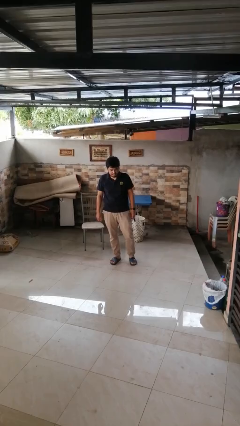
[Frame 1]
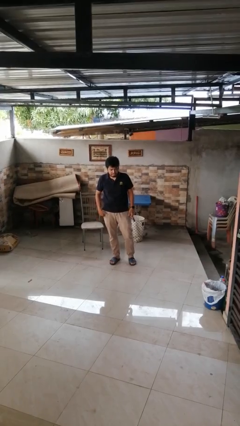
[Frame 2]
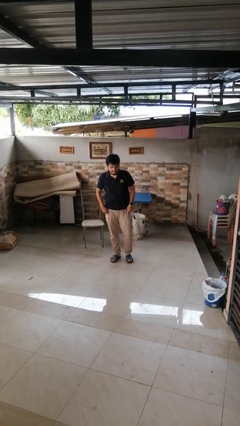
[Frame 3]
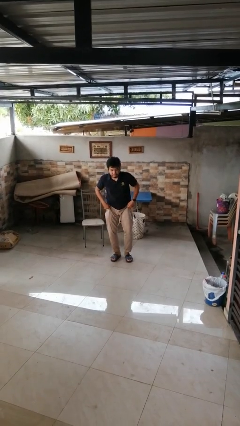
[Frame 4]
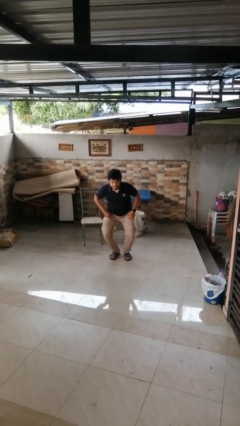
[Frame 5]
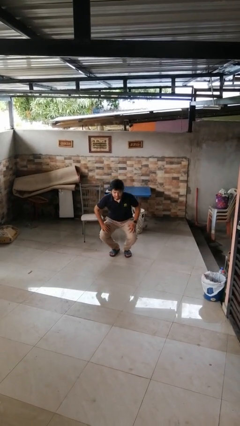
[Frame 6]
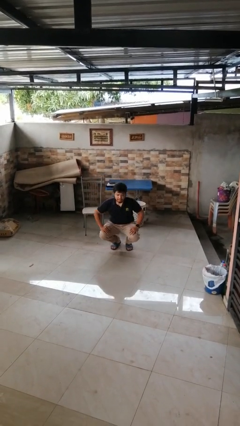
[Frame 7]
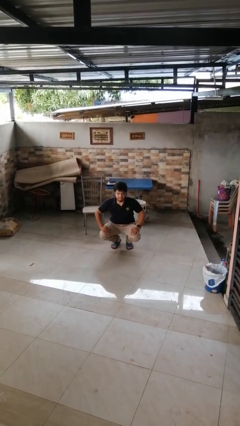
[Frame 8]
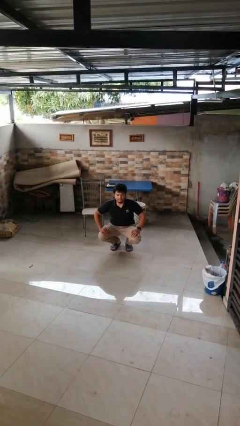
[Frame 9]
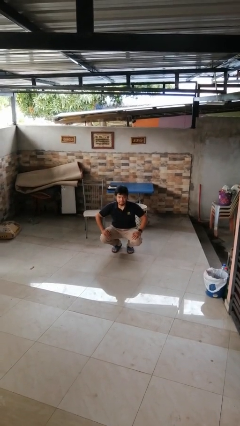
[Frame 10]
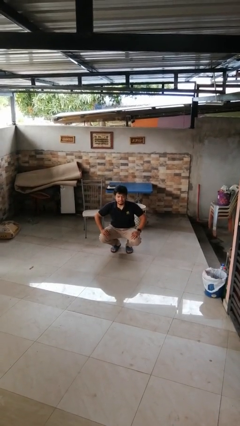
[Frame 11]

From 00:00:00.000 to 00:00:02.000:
person squats

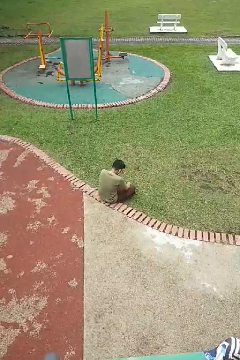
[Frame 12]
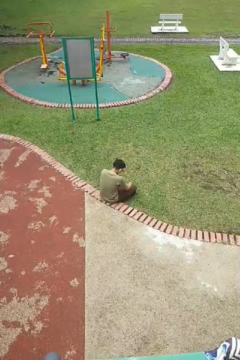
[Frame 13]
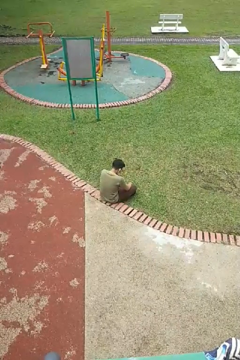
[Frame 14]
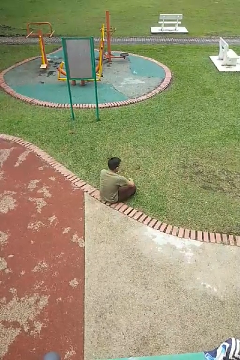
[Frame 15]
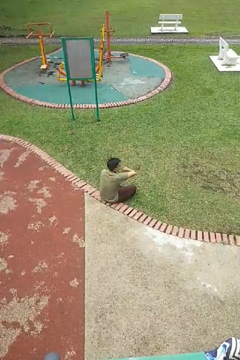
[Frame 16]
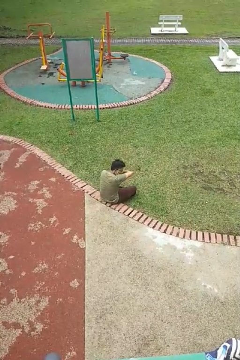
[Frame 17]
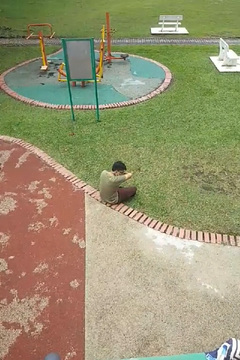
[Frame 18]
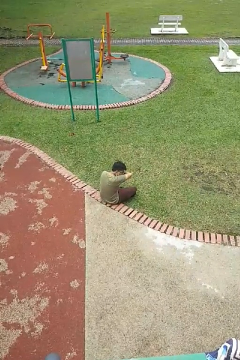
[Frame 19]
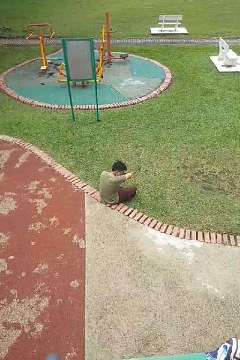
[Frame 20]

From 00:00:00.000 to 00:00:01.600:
person sneezes into arm

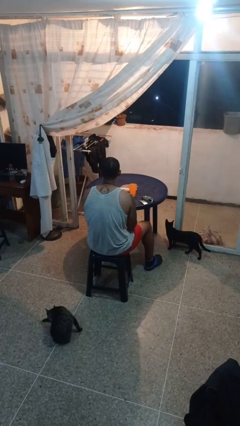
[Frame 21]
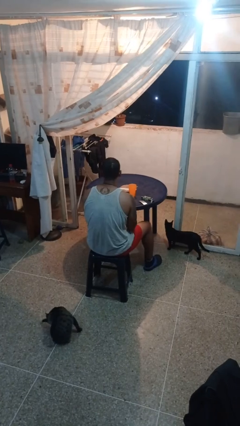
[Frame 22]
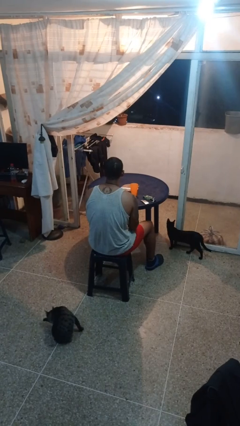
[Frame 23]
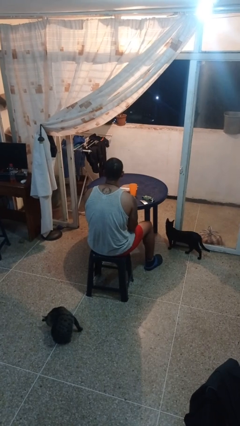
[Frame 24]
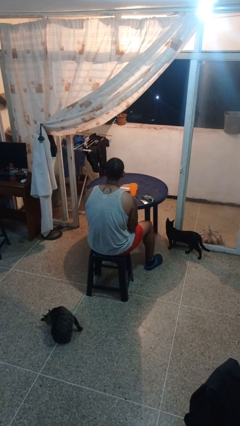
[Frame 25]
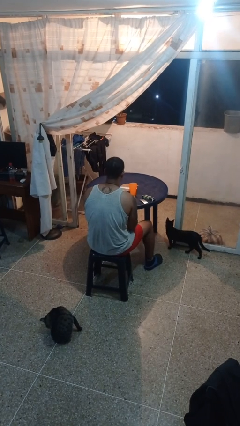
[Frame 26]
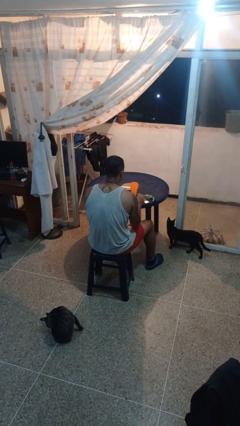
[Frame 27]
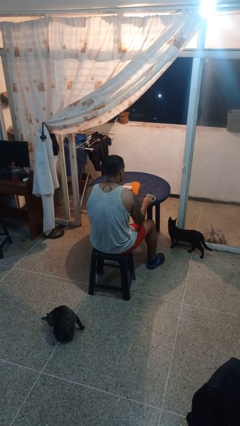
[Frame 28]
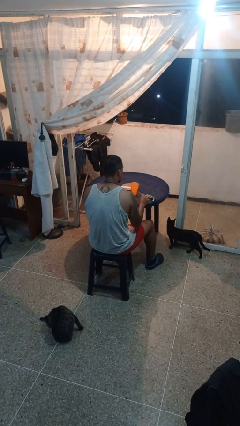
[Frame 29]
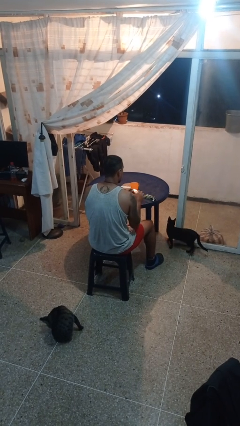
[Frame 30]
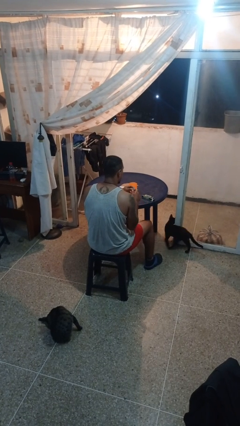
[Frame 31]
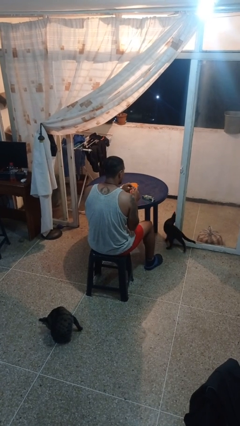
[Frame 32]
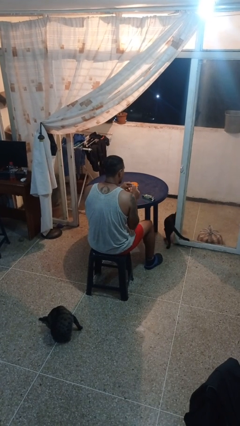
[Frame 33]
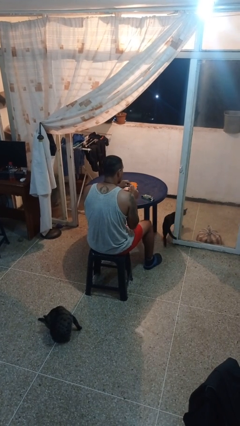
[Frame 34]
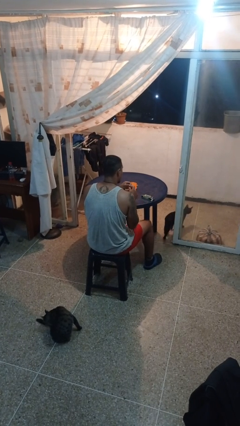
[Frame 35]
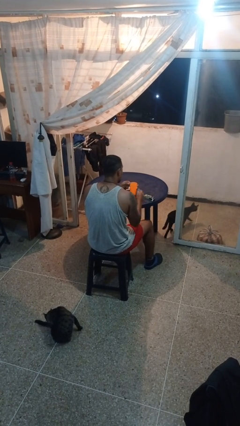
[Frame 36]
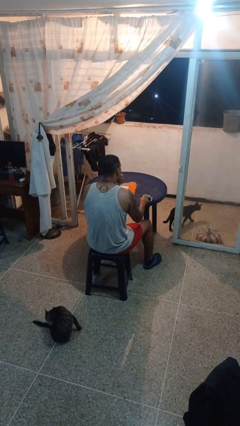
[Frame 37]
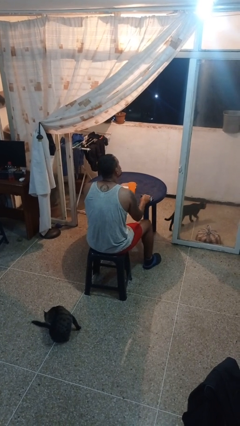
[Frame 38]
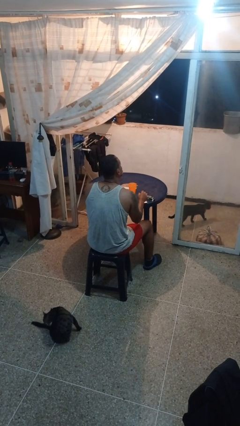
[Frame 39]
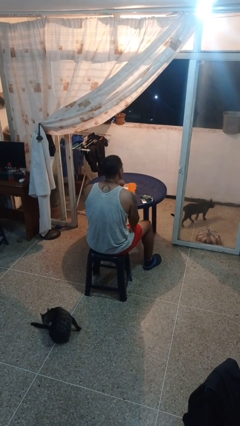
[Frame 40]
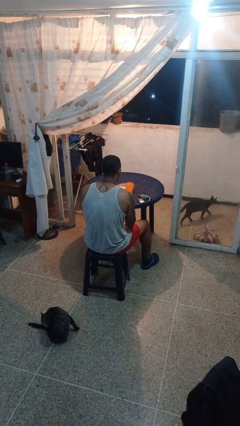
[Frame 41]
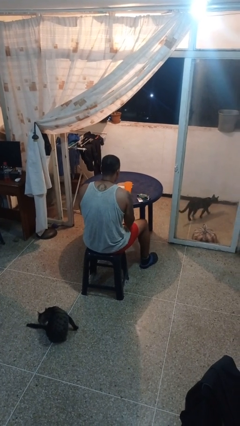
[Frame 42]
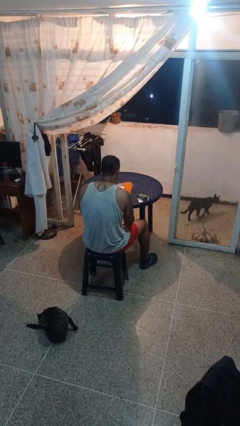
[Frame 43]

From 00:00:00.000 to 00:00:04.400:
person takes medicine pills

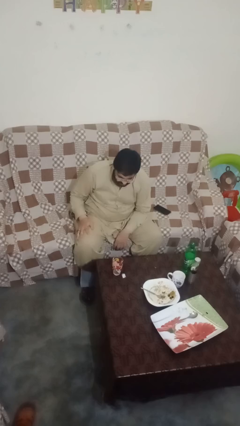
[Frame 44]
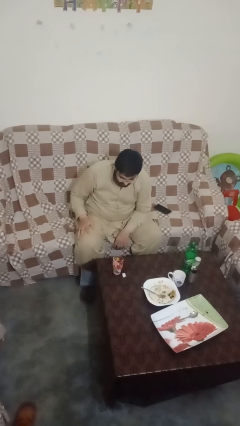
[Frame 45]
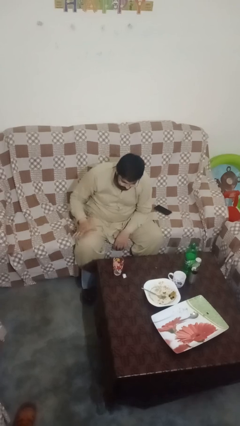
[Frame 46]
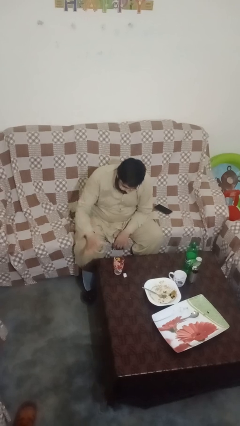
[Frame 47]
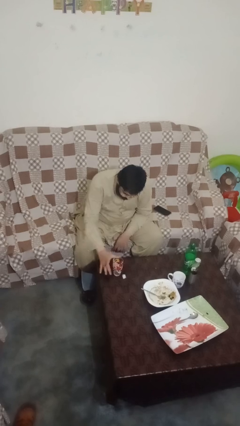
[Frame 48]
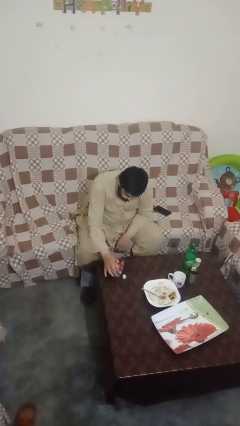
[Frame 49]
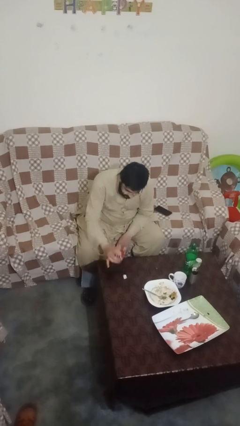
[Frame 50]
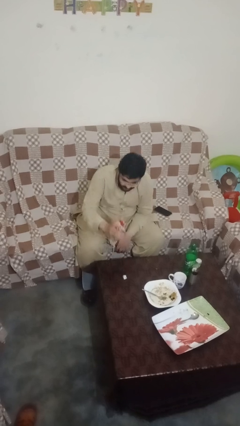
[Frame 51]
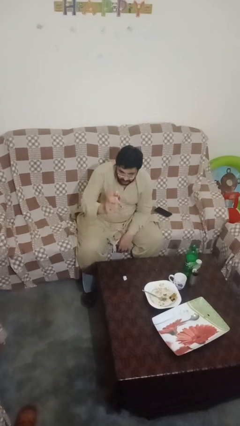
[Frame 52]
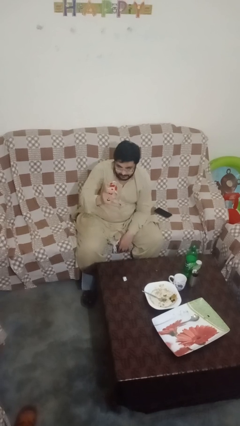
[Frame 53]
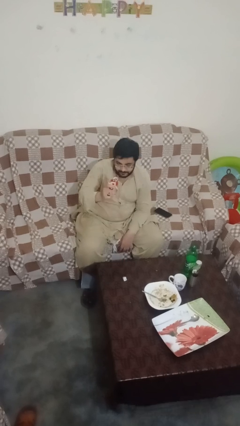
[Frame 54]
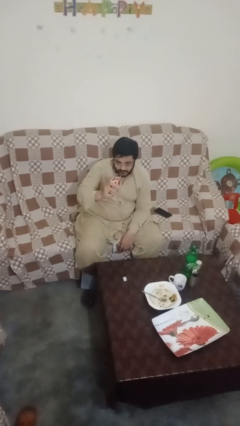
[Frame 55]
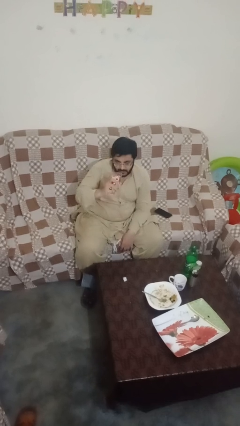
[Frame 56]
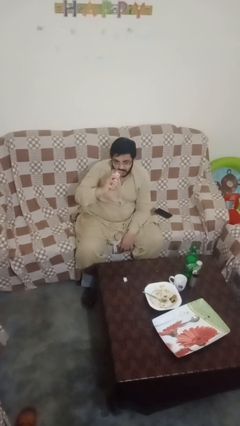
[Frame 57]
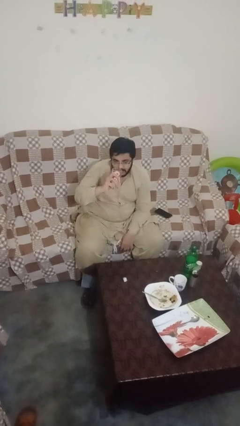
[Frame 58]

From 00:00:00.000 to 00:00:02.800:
person picks up object from table

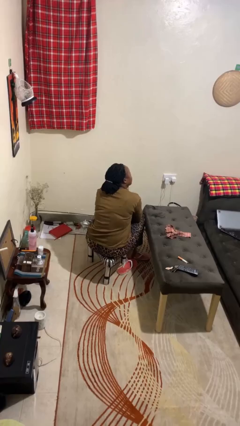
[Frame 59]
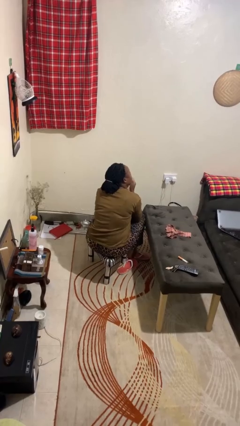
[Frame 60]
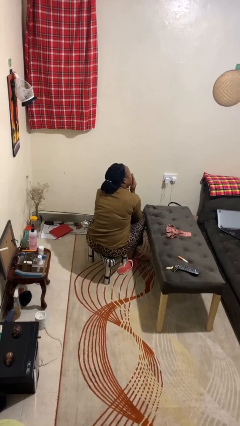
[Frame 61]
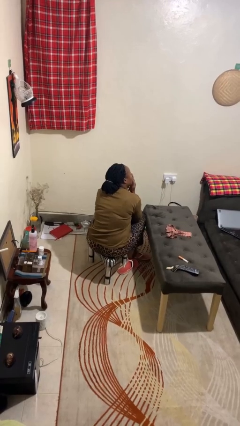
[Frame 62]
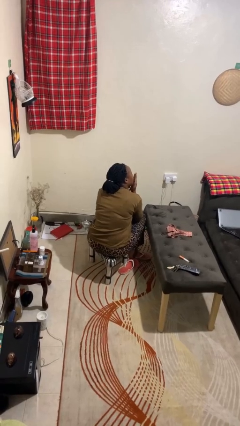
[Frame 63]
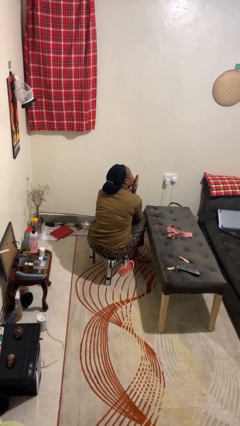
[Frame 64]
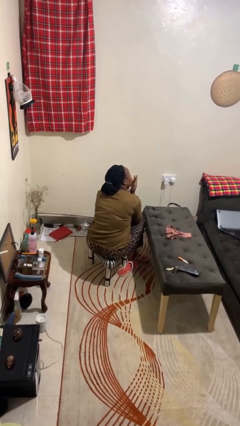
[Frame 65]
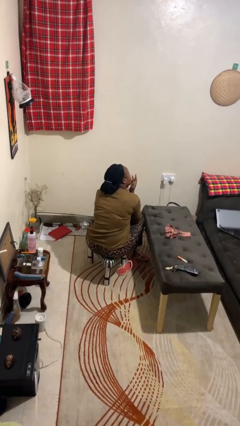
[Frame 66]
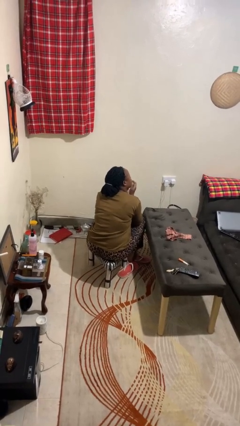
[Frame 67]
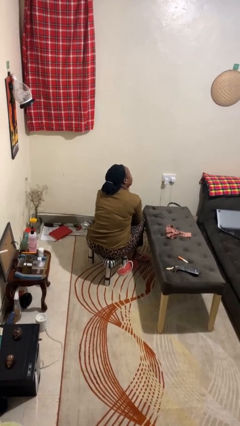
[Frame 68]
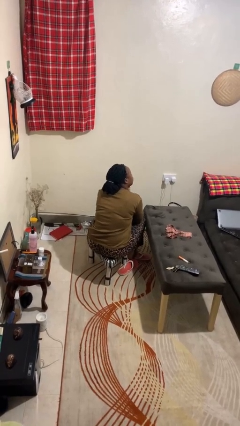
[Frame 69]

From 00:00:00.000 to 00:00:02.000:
person gestures blow kiss

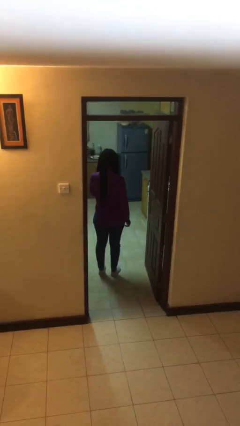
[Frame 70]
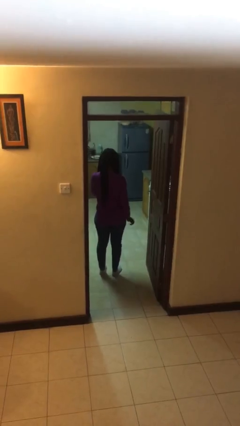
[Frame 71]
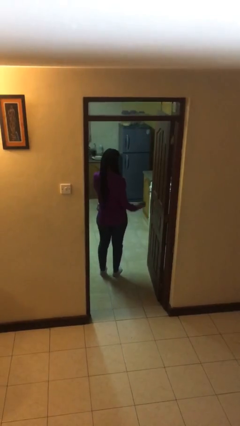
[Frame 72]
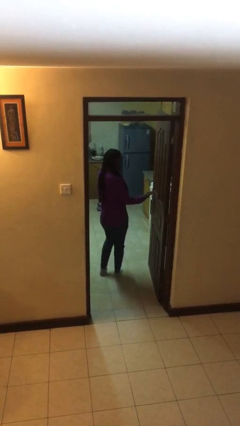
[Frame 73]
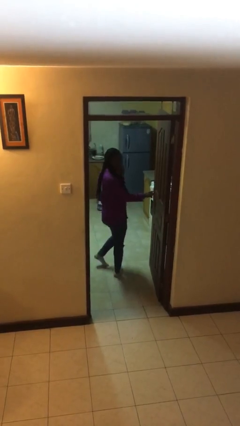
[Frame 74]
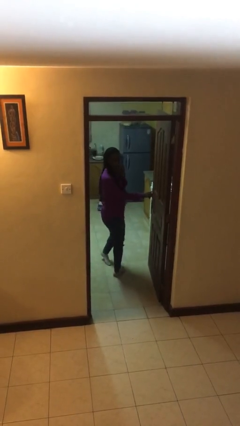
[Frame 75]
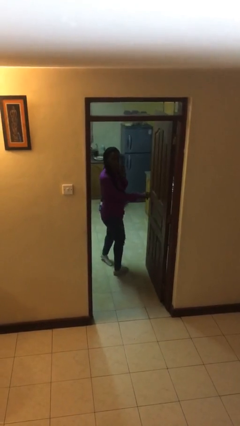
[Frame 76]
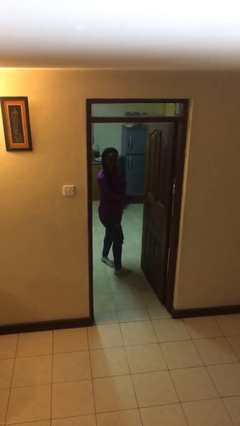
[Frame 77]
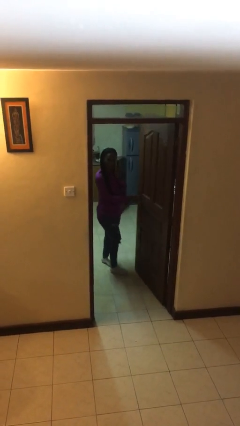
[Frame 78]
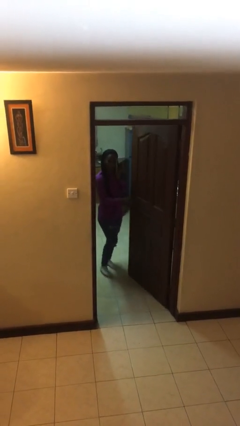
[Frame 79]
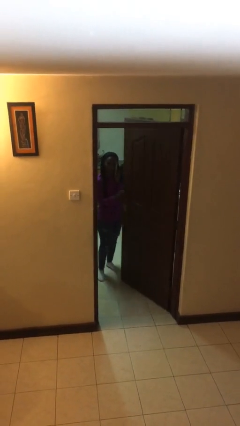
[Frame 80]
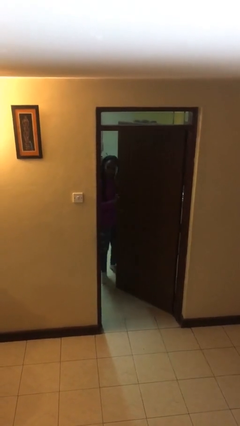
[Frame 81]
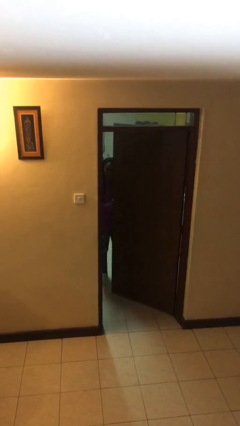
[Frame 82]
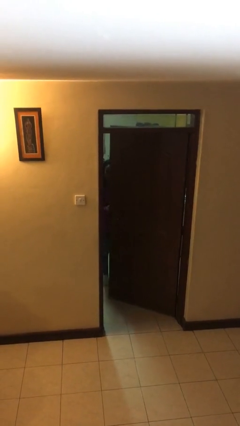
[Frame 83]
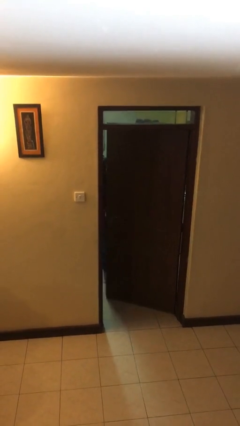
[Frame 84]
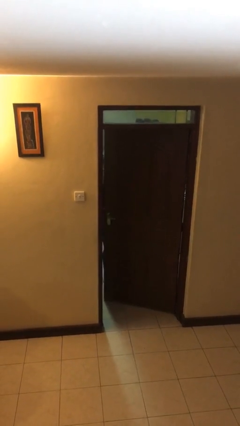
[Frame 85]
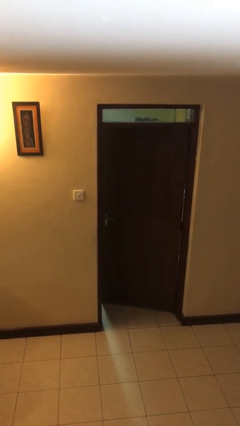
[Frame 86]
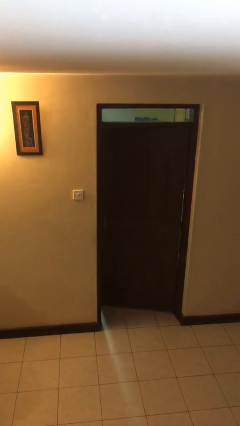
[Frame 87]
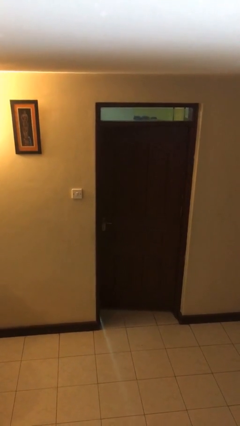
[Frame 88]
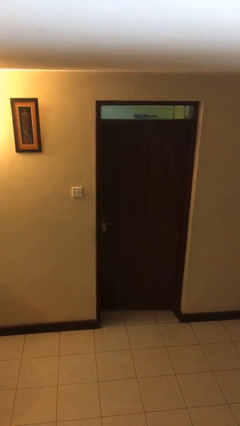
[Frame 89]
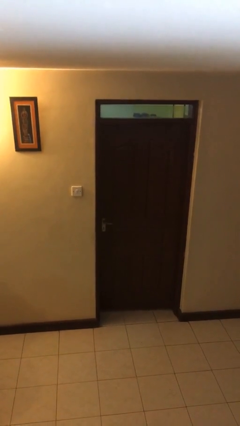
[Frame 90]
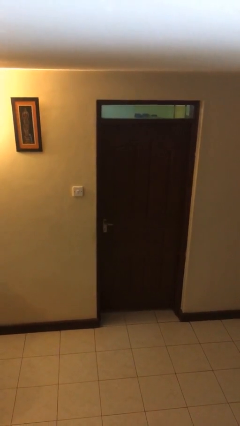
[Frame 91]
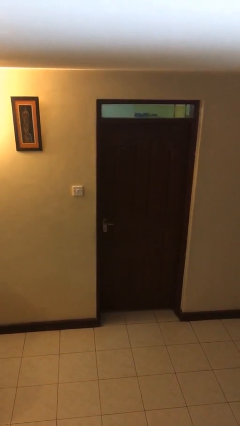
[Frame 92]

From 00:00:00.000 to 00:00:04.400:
person closes facility door

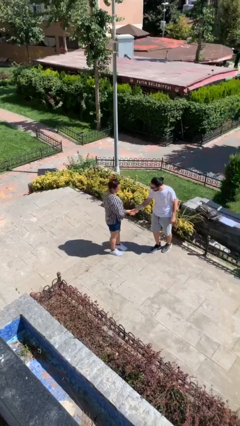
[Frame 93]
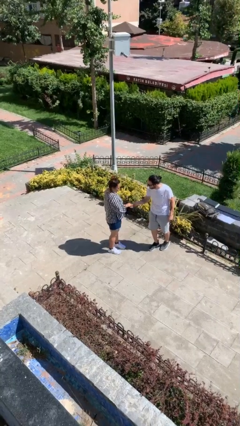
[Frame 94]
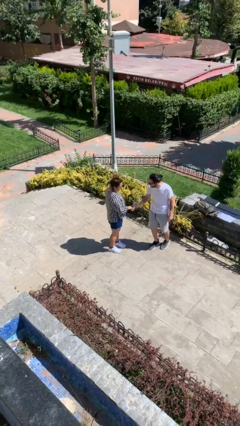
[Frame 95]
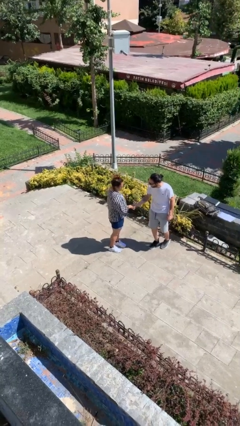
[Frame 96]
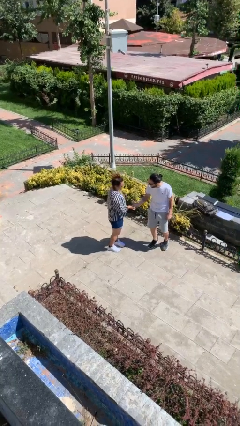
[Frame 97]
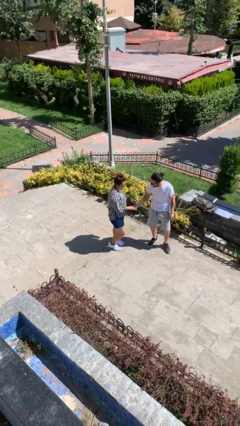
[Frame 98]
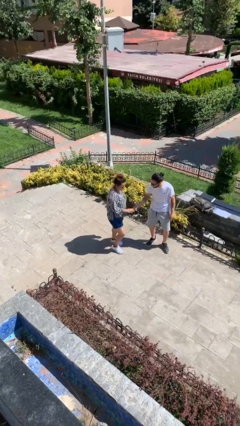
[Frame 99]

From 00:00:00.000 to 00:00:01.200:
person shakes hand
